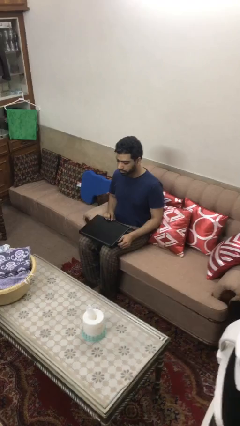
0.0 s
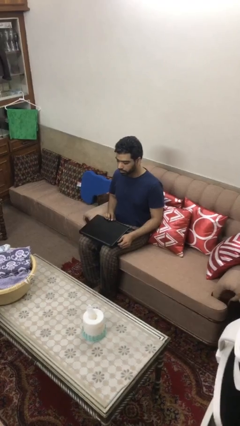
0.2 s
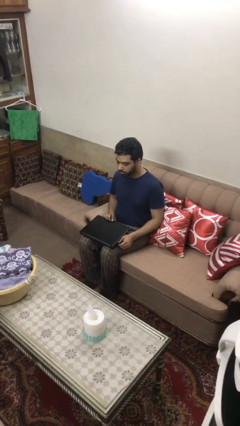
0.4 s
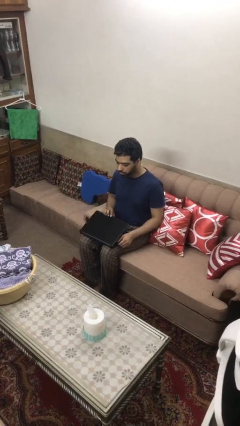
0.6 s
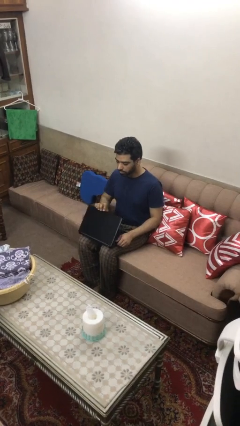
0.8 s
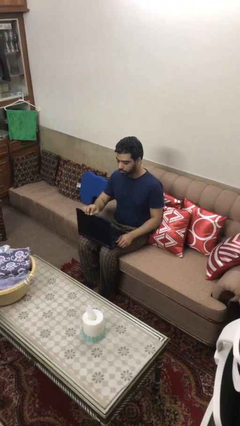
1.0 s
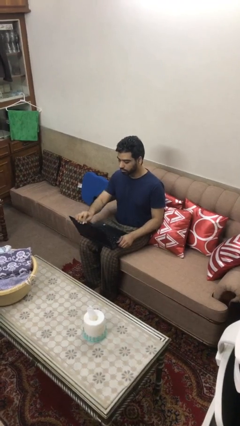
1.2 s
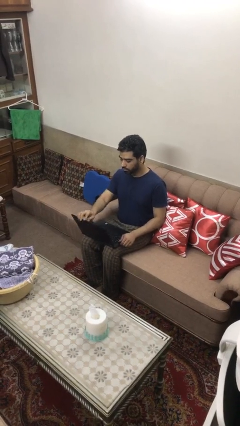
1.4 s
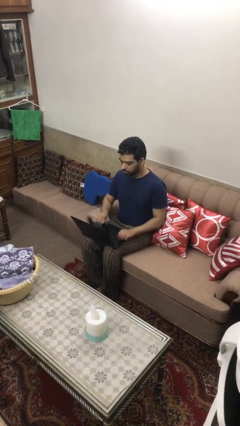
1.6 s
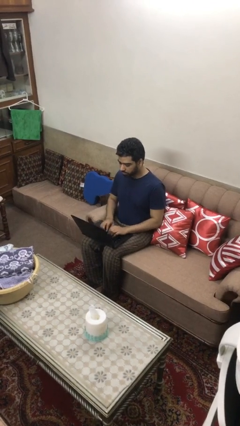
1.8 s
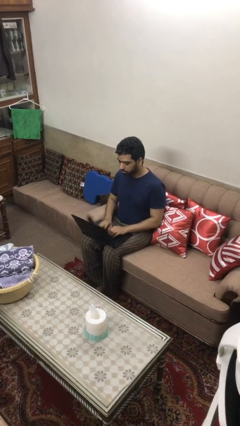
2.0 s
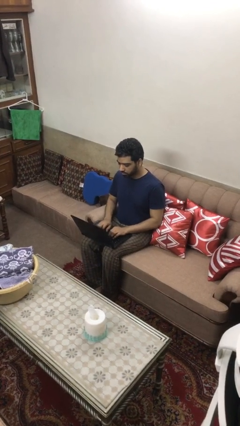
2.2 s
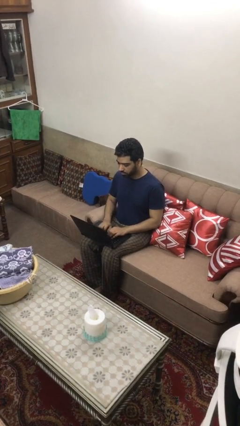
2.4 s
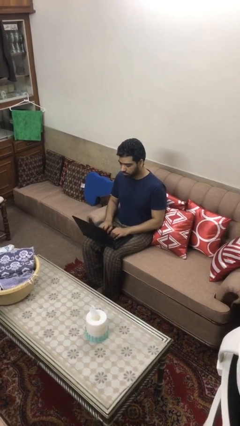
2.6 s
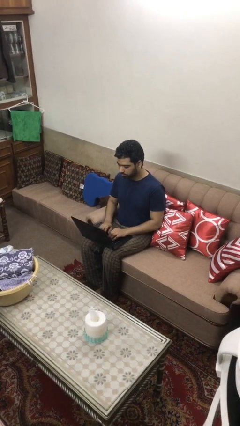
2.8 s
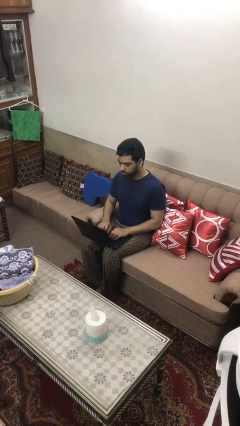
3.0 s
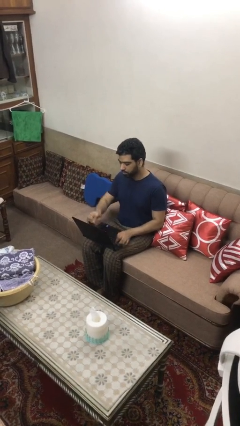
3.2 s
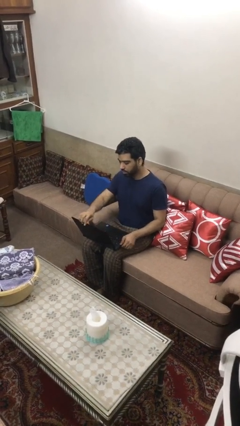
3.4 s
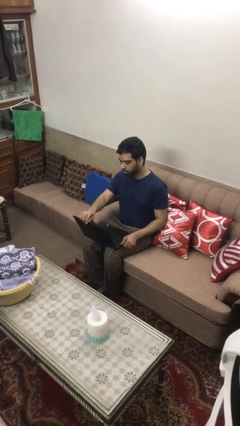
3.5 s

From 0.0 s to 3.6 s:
person interacts with laptop

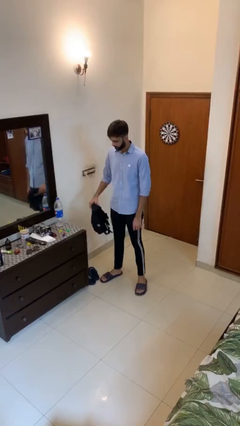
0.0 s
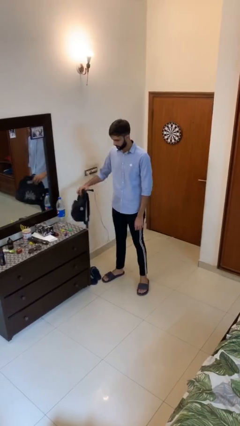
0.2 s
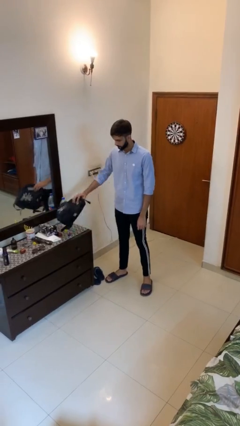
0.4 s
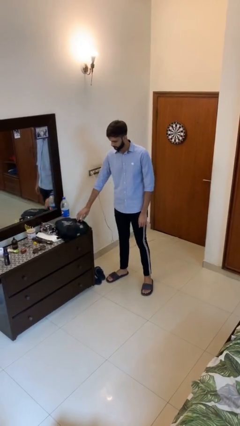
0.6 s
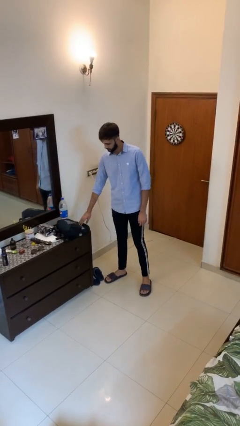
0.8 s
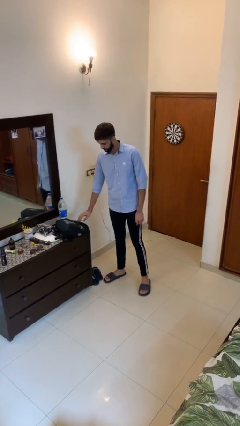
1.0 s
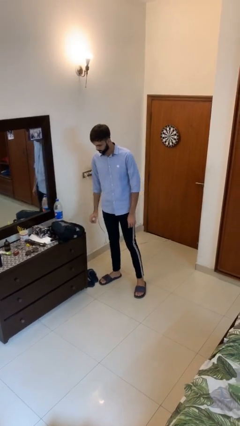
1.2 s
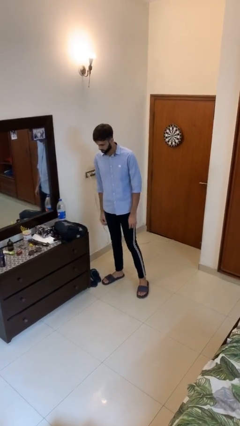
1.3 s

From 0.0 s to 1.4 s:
person puts down object on table

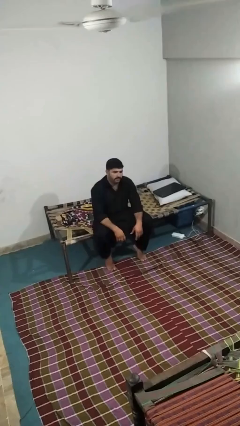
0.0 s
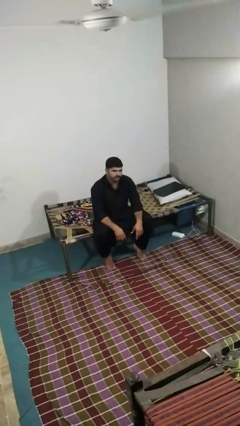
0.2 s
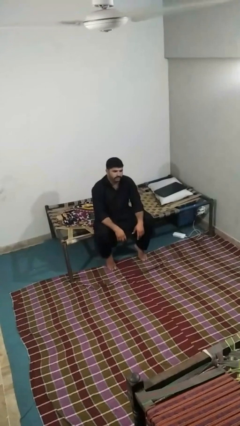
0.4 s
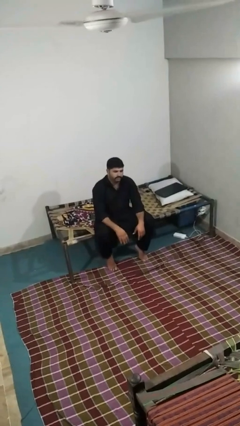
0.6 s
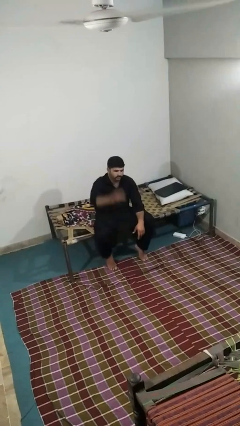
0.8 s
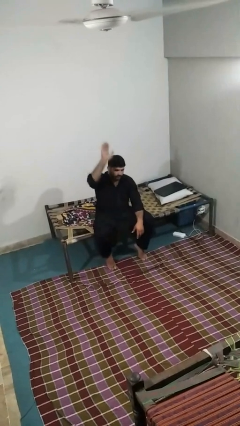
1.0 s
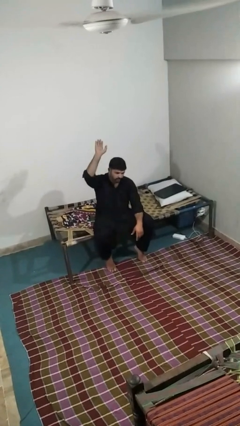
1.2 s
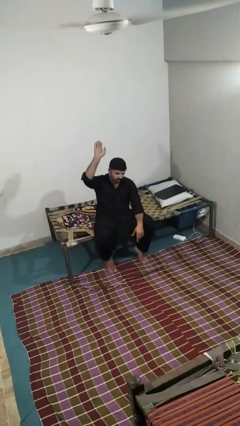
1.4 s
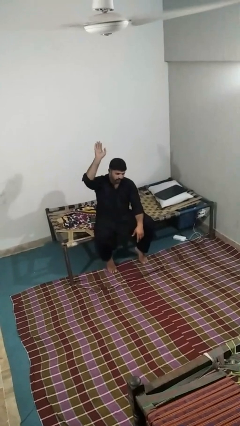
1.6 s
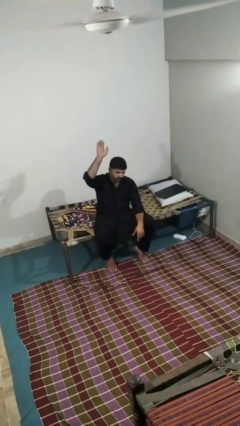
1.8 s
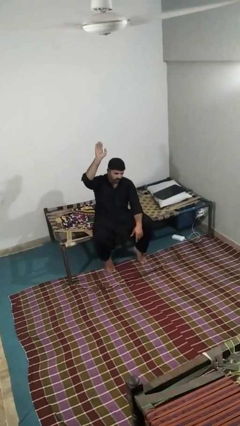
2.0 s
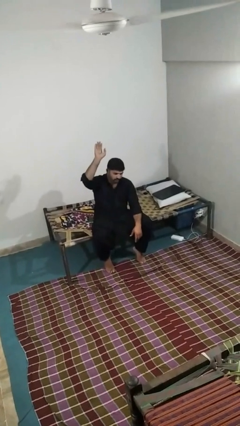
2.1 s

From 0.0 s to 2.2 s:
person gestures raise hand

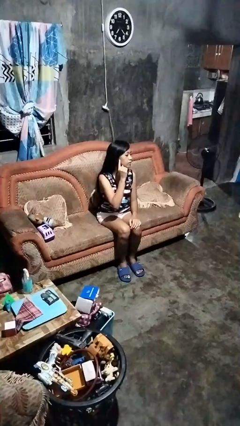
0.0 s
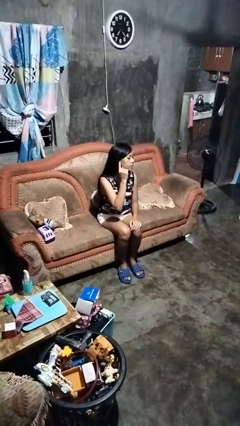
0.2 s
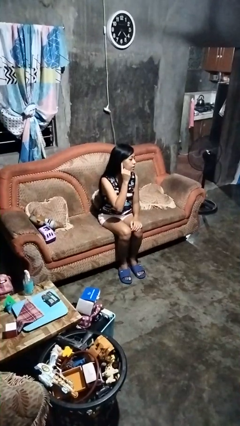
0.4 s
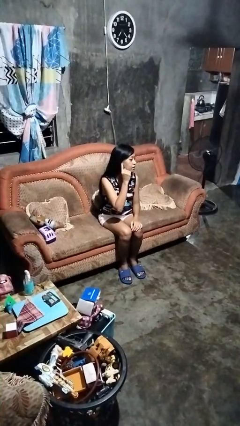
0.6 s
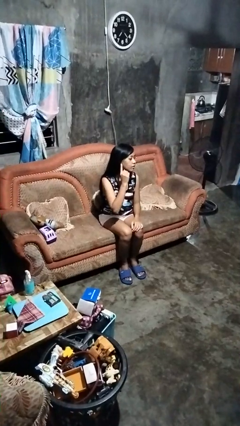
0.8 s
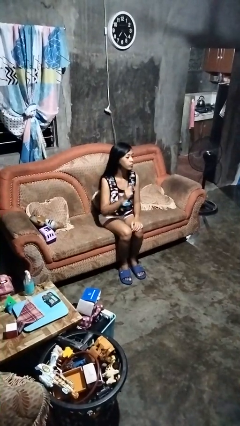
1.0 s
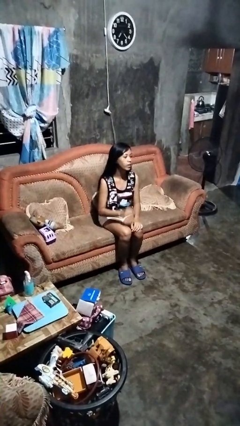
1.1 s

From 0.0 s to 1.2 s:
person gestures listen closely

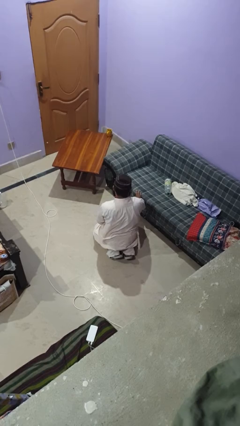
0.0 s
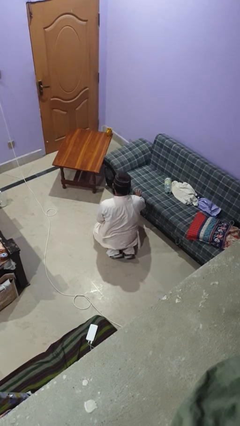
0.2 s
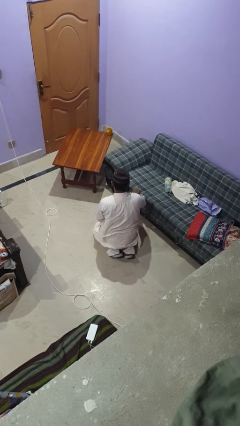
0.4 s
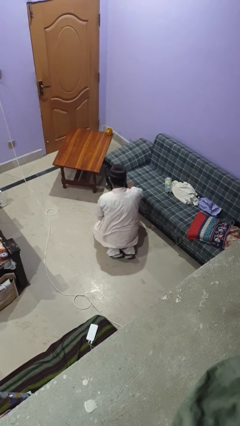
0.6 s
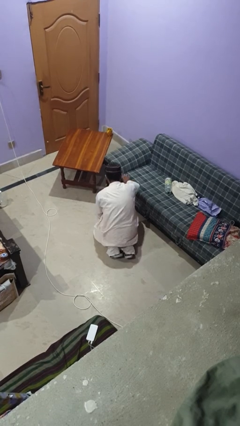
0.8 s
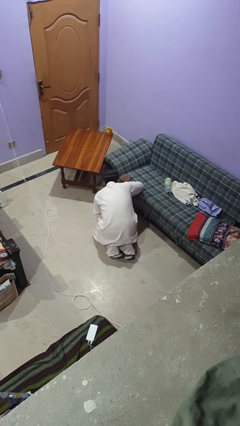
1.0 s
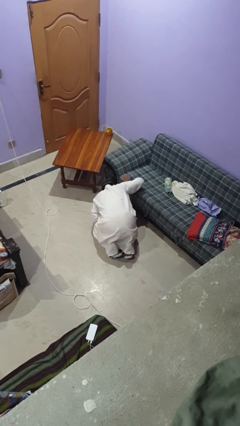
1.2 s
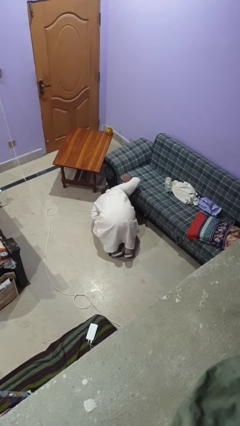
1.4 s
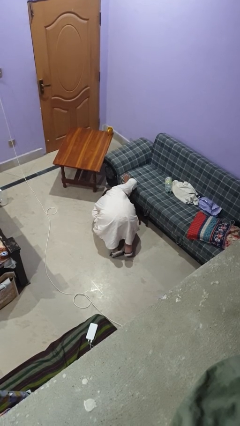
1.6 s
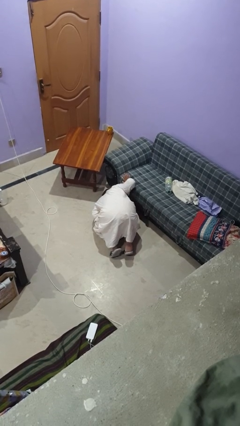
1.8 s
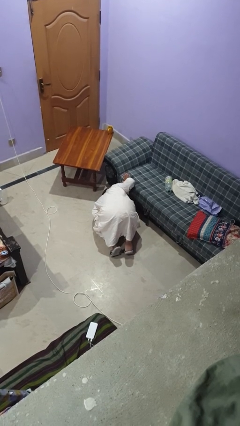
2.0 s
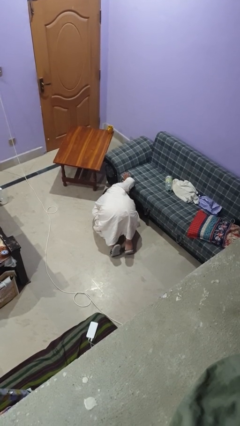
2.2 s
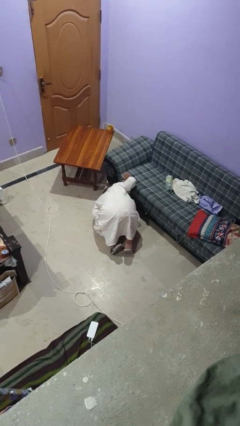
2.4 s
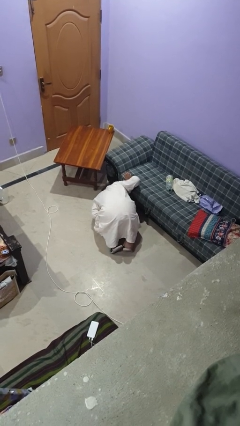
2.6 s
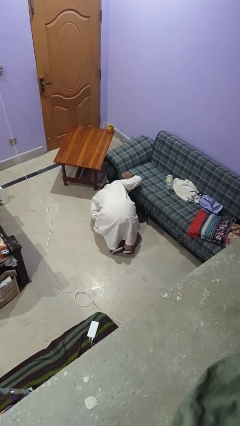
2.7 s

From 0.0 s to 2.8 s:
person searches under couch

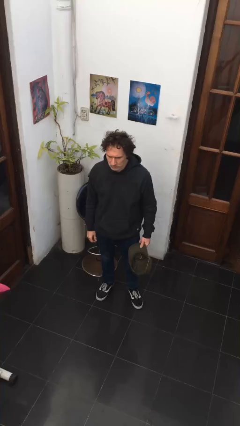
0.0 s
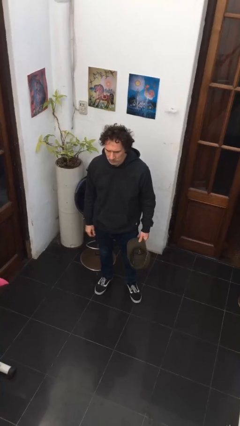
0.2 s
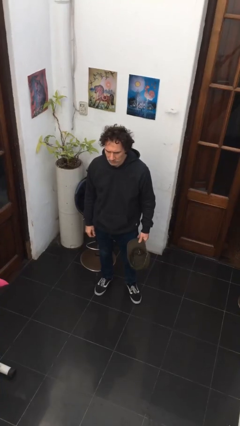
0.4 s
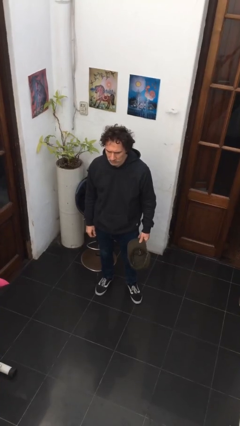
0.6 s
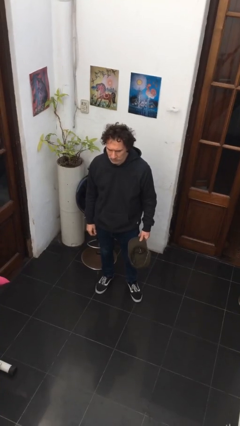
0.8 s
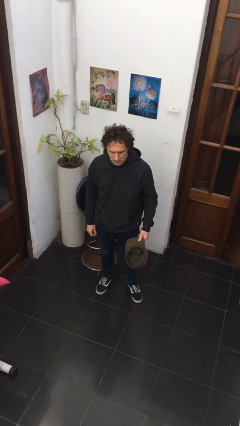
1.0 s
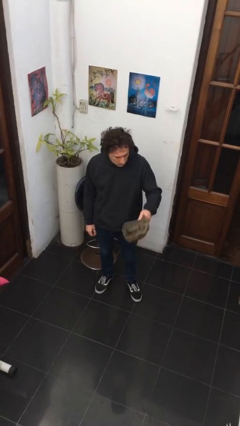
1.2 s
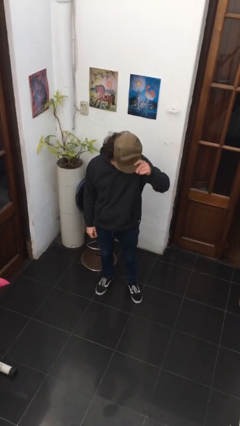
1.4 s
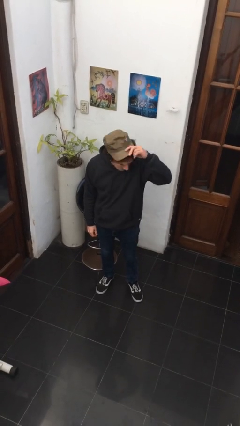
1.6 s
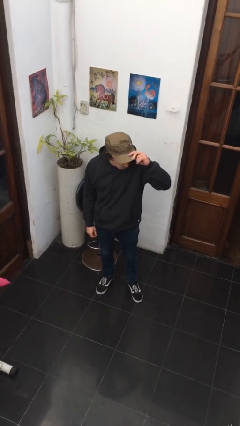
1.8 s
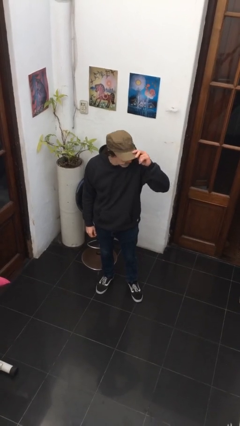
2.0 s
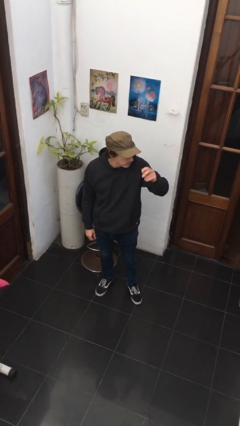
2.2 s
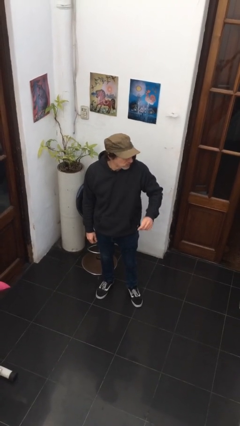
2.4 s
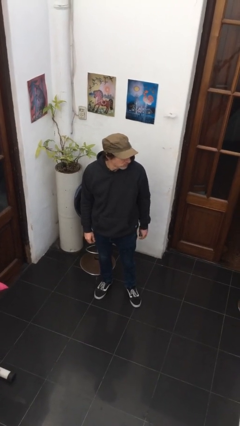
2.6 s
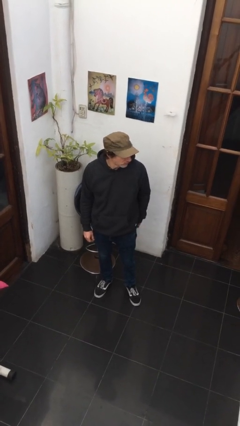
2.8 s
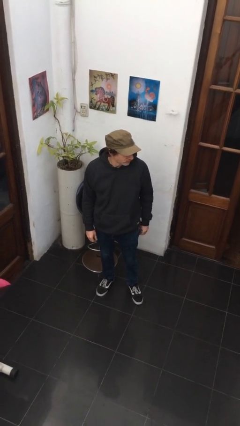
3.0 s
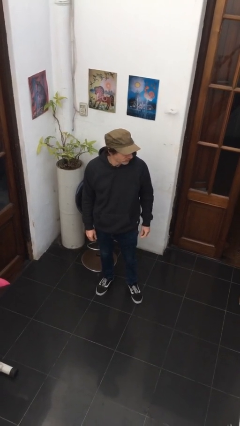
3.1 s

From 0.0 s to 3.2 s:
person puts on hat

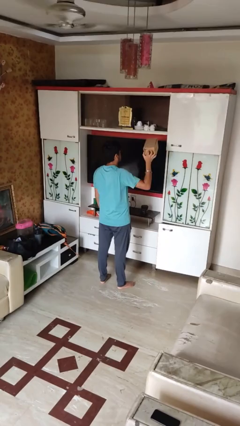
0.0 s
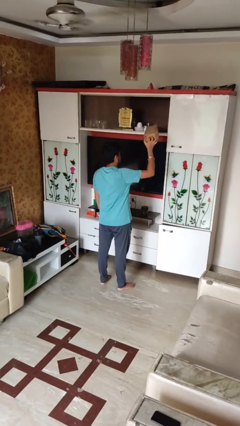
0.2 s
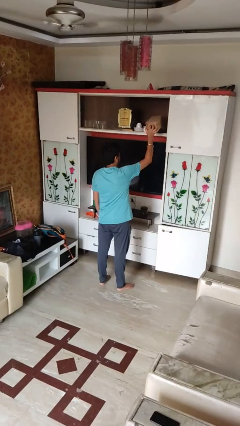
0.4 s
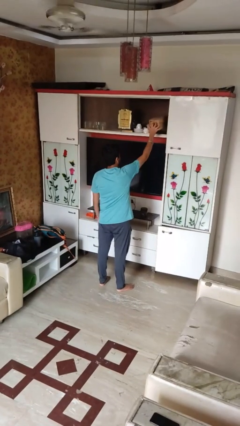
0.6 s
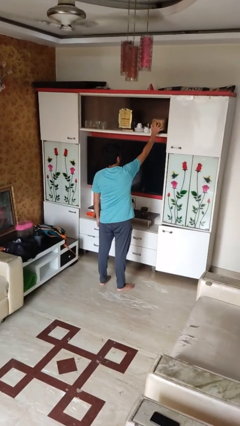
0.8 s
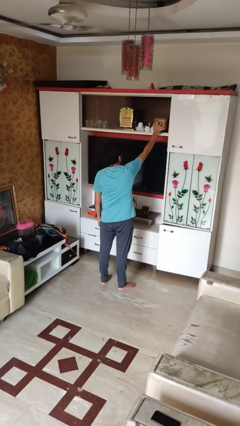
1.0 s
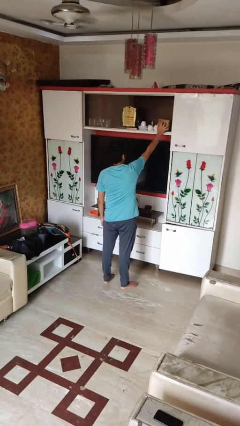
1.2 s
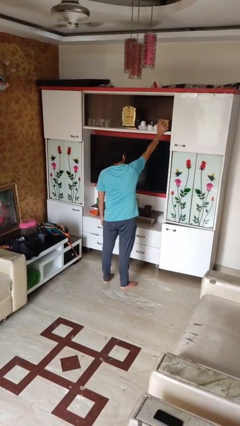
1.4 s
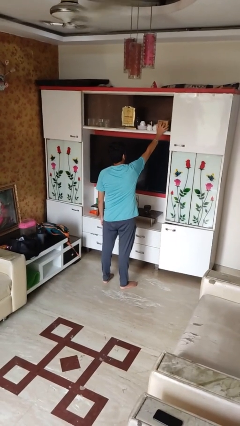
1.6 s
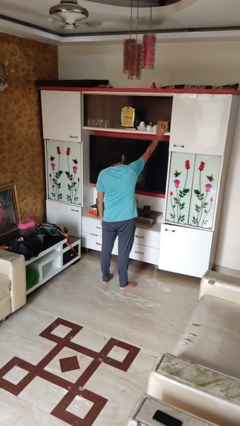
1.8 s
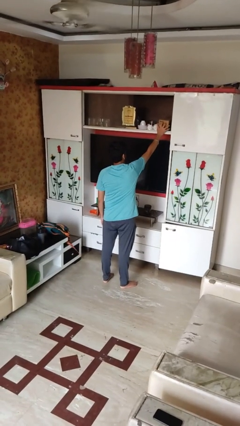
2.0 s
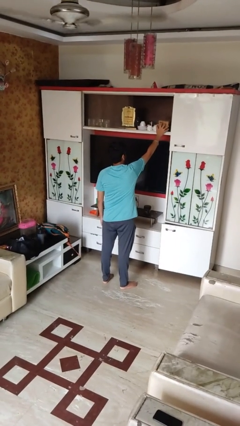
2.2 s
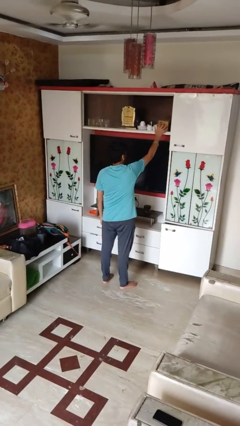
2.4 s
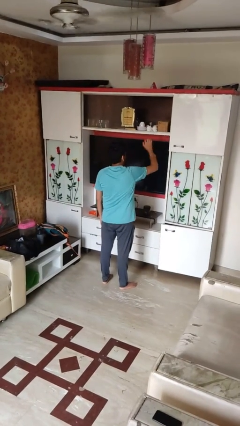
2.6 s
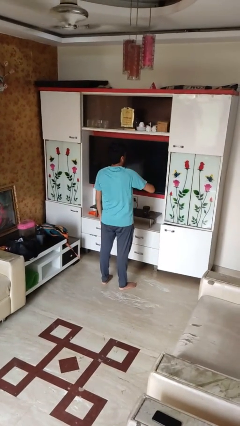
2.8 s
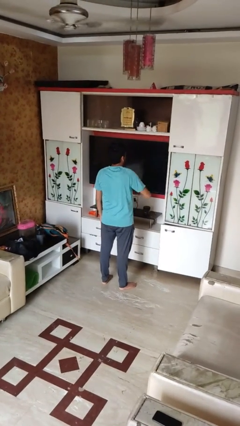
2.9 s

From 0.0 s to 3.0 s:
person puts down object on shelf
